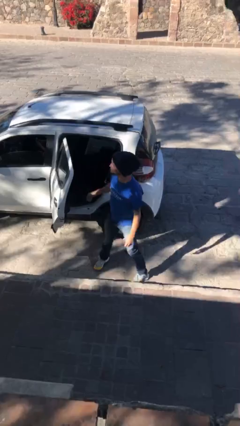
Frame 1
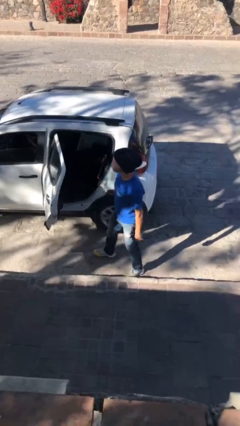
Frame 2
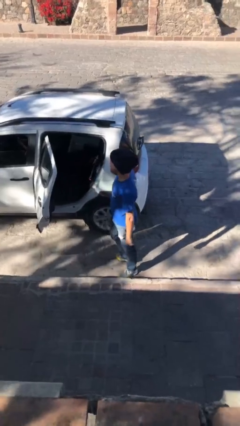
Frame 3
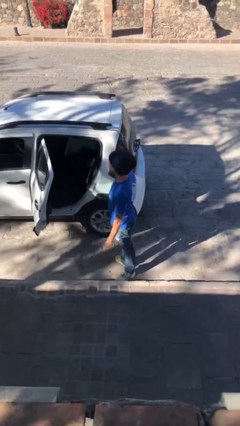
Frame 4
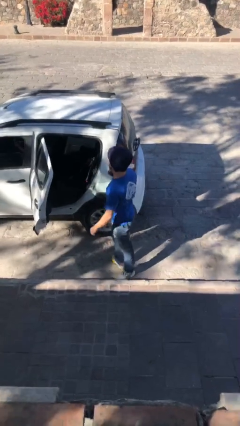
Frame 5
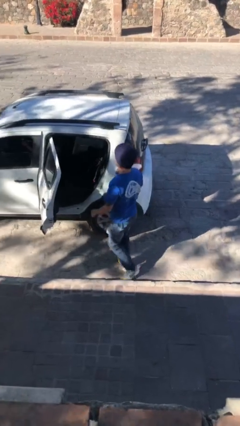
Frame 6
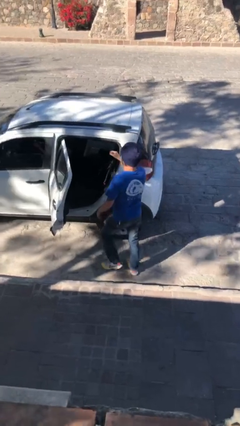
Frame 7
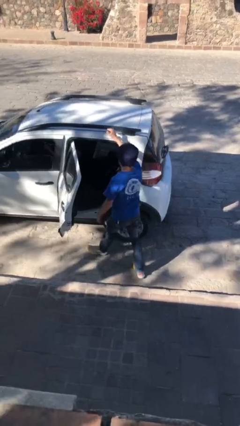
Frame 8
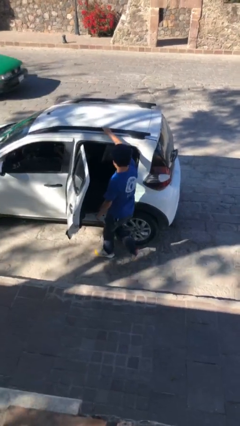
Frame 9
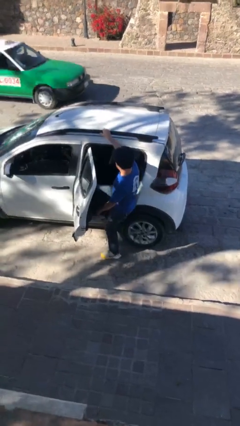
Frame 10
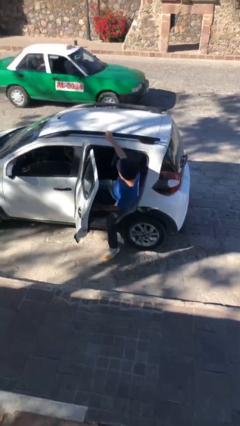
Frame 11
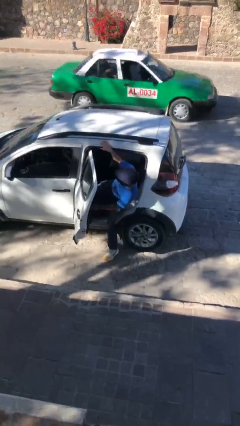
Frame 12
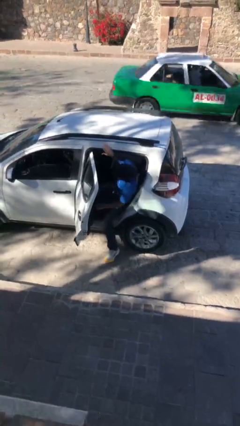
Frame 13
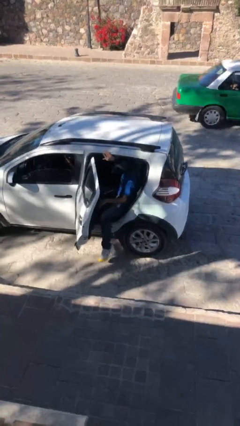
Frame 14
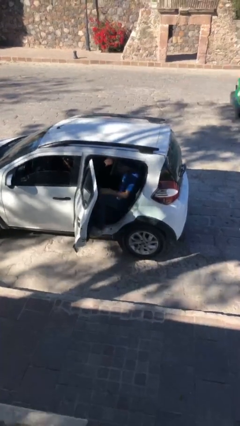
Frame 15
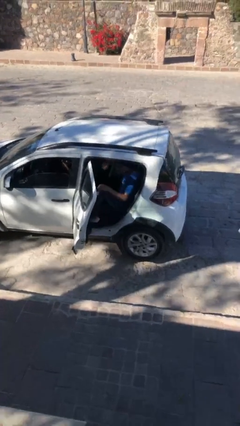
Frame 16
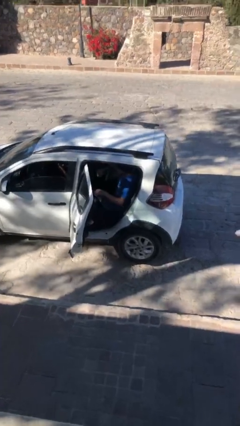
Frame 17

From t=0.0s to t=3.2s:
person enters car

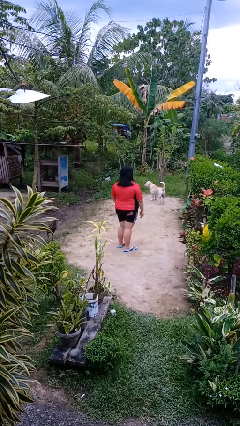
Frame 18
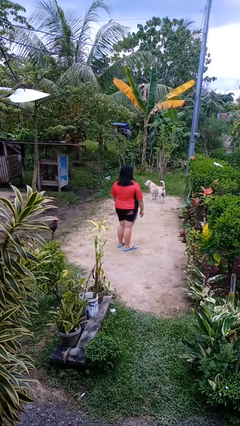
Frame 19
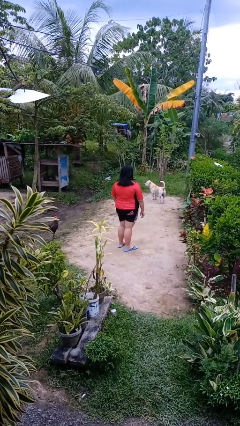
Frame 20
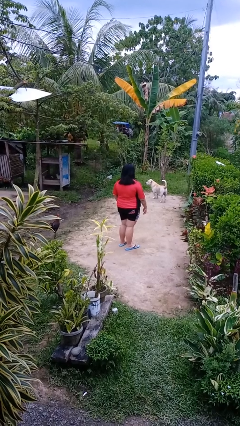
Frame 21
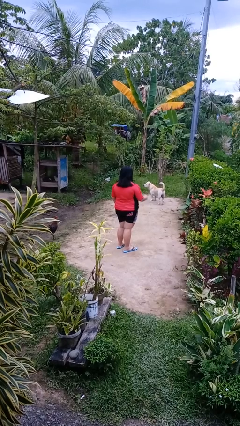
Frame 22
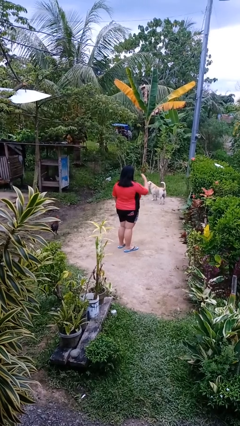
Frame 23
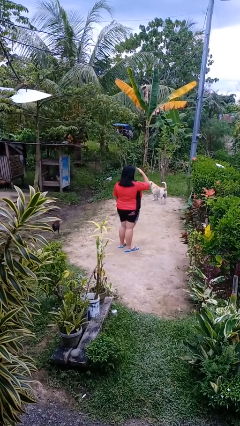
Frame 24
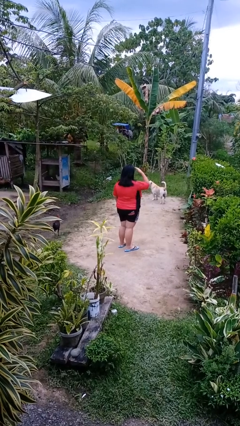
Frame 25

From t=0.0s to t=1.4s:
person shades eyes

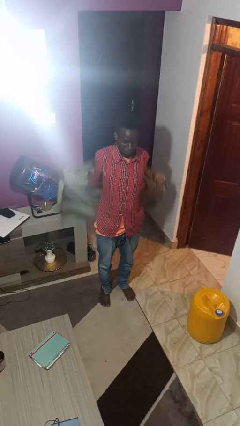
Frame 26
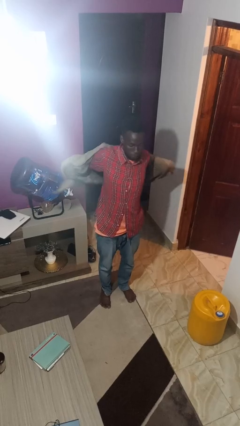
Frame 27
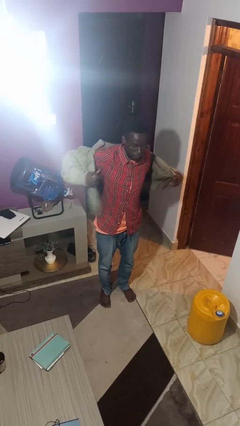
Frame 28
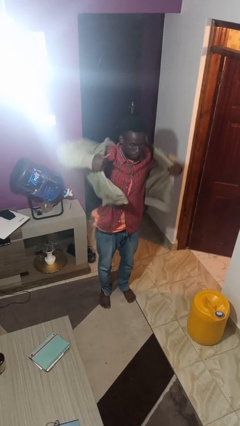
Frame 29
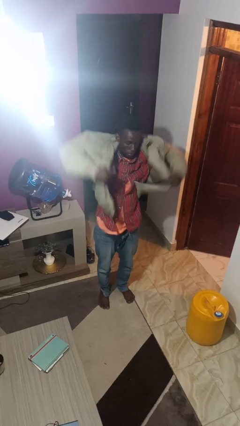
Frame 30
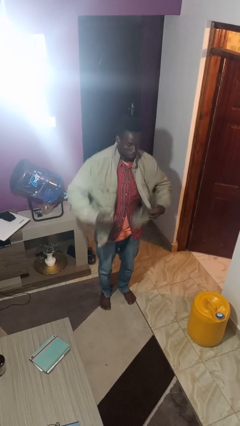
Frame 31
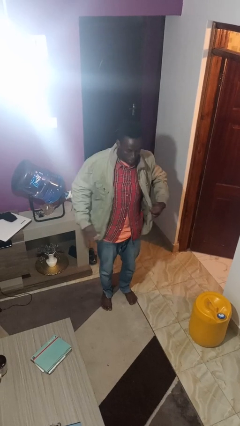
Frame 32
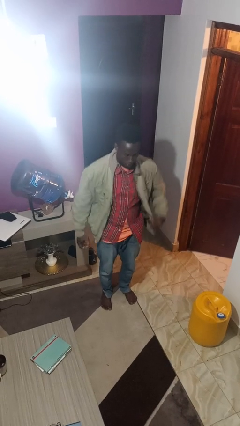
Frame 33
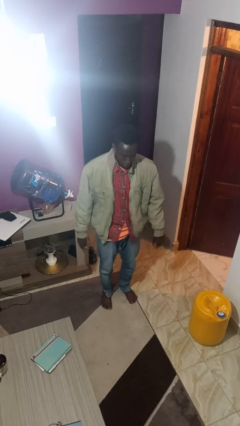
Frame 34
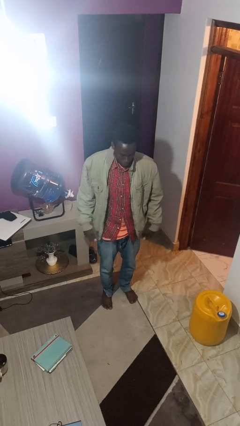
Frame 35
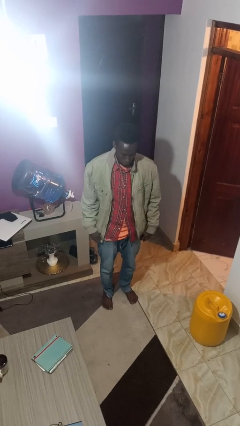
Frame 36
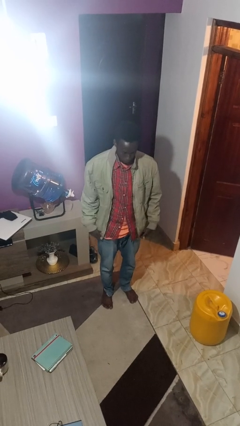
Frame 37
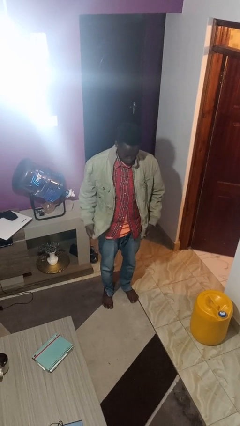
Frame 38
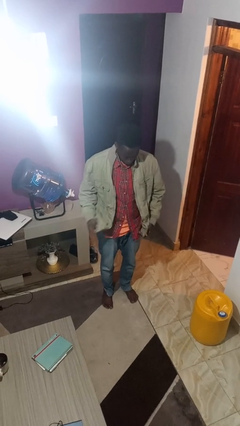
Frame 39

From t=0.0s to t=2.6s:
person puts on jacket

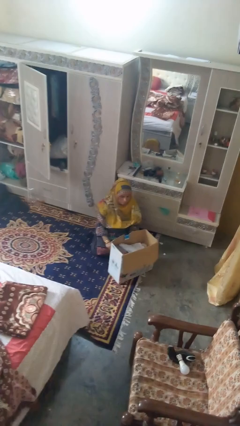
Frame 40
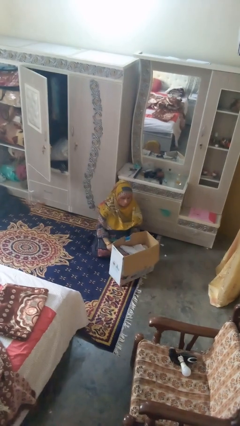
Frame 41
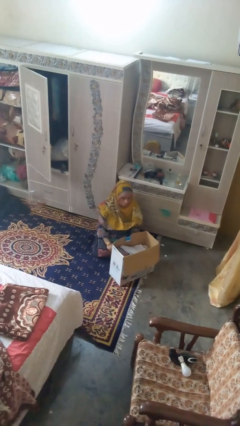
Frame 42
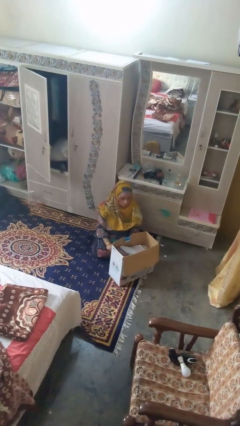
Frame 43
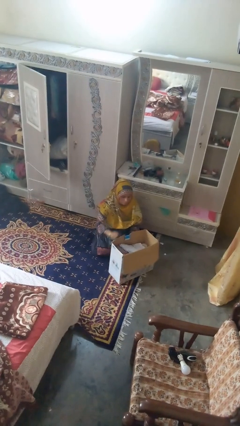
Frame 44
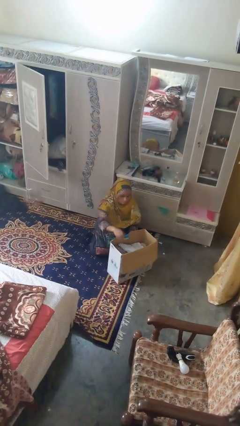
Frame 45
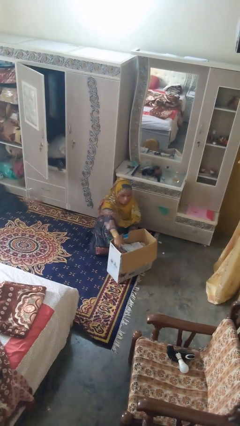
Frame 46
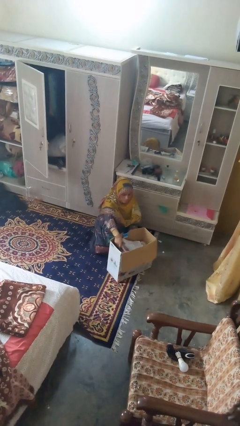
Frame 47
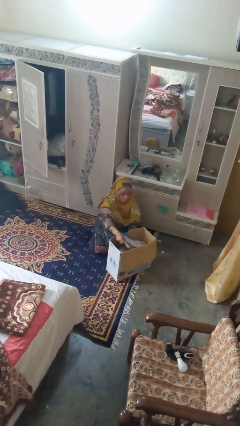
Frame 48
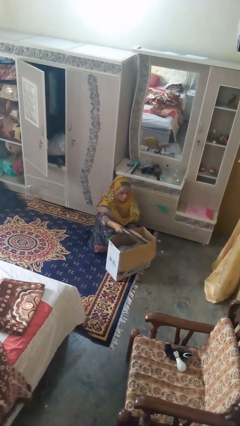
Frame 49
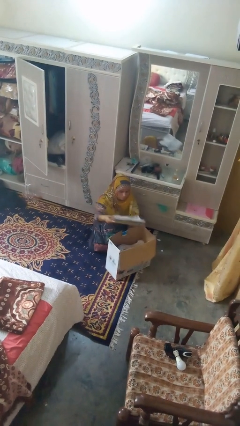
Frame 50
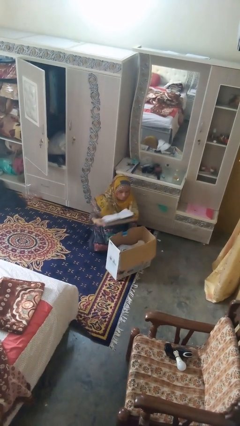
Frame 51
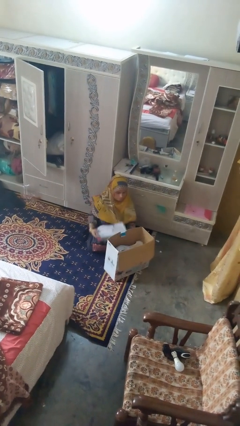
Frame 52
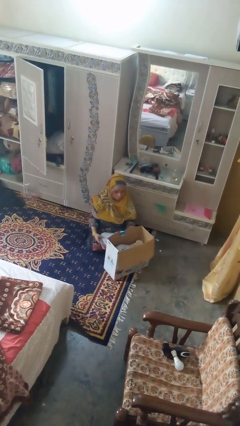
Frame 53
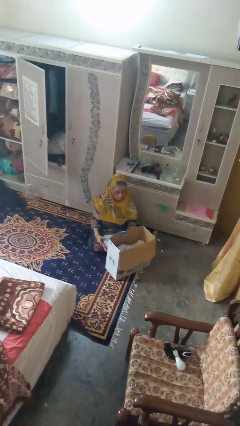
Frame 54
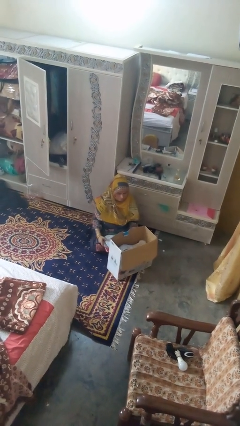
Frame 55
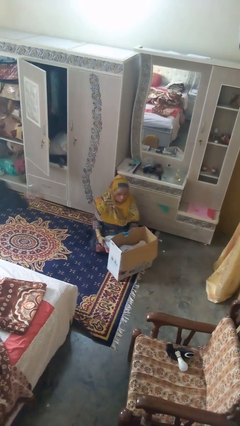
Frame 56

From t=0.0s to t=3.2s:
person takes object from box

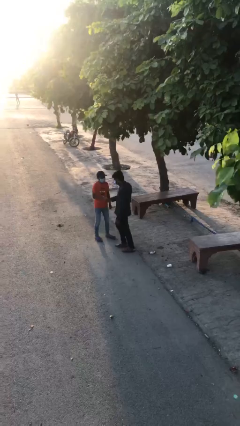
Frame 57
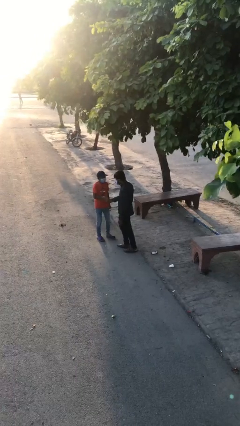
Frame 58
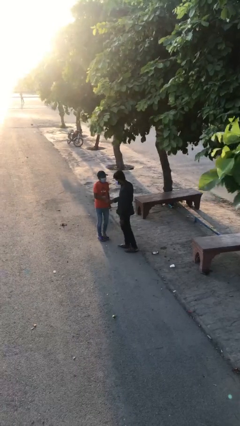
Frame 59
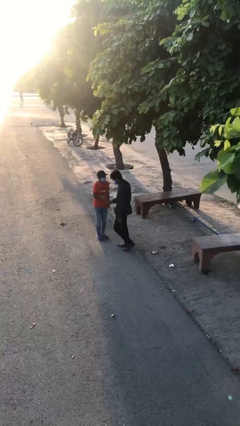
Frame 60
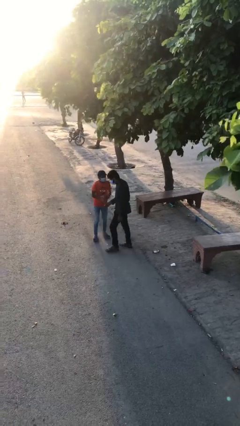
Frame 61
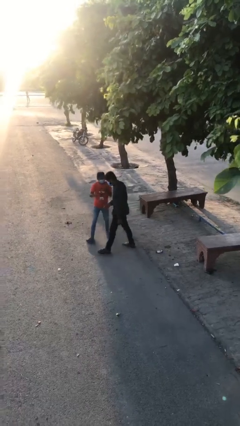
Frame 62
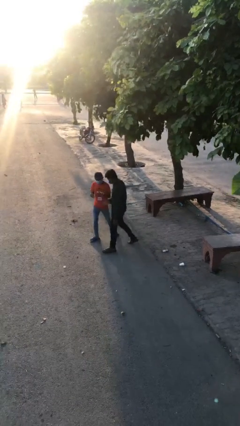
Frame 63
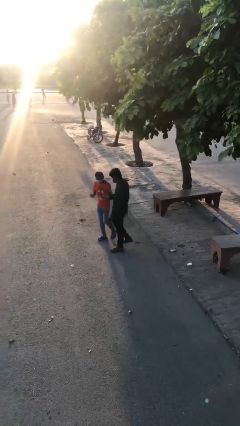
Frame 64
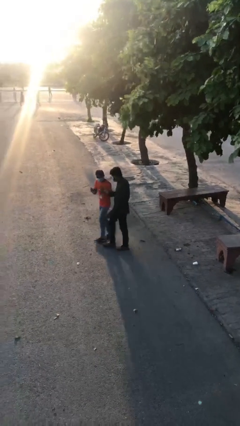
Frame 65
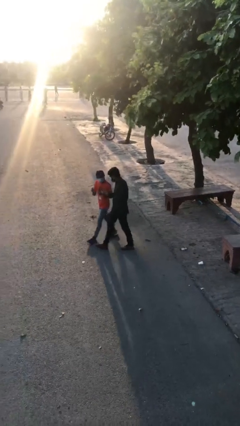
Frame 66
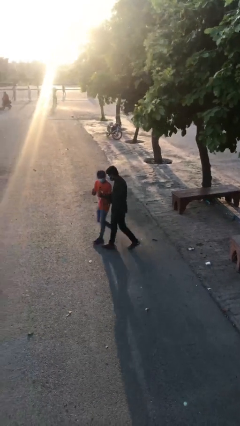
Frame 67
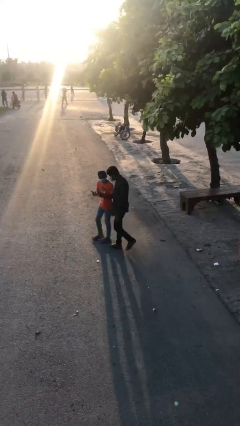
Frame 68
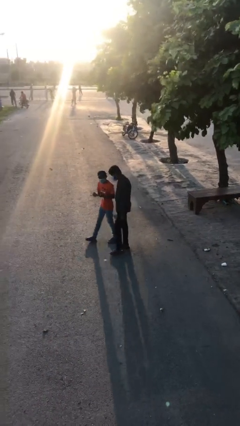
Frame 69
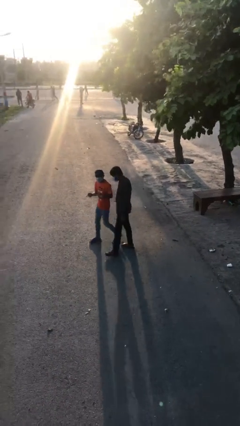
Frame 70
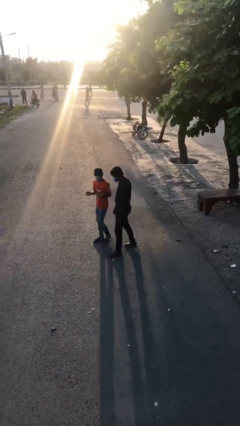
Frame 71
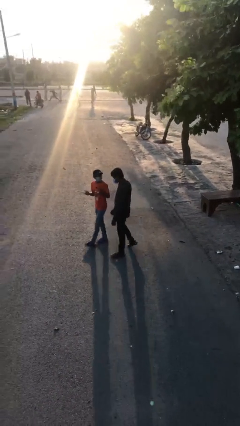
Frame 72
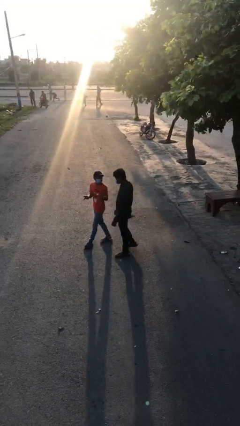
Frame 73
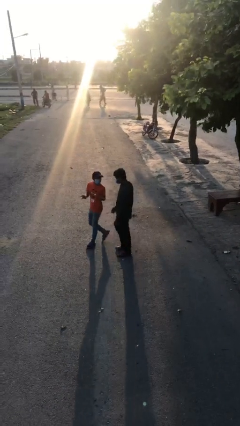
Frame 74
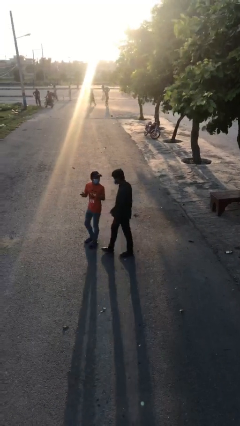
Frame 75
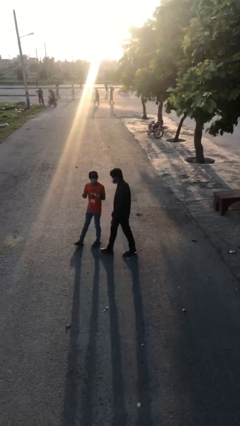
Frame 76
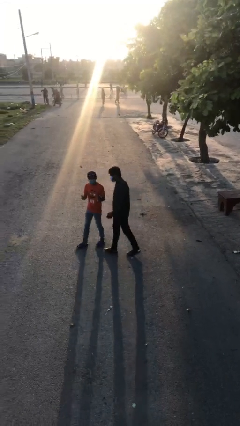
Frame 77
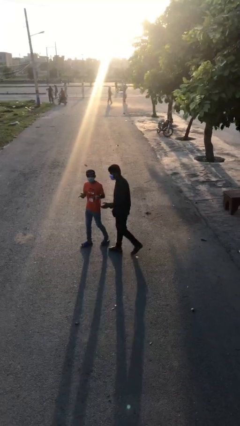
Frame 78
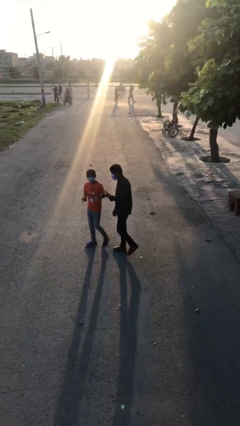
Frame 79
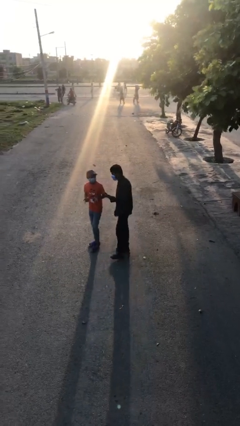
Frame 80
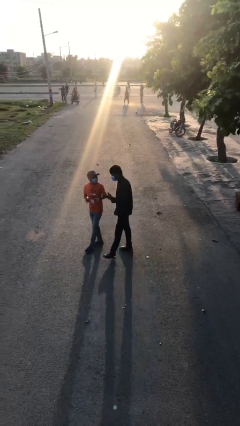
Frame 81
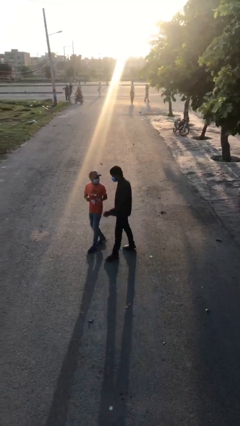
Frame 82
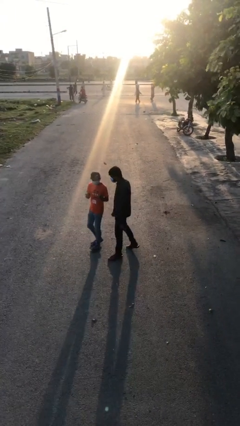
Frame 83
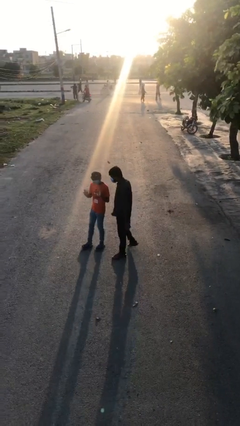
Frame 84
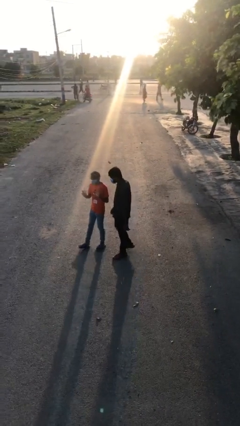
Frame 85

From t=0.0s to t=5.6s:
person talks to person

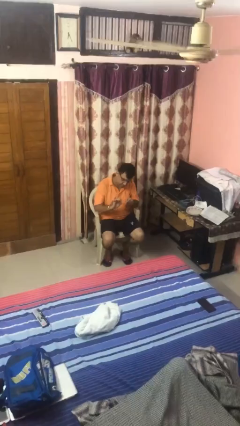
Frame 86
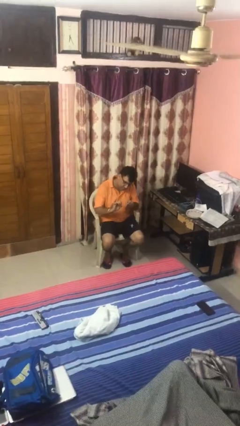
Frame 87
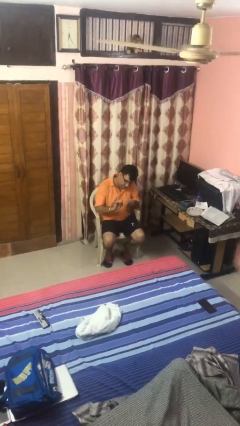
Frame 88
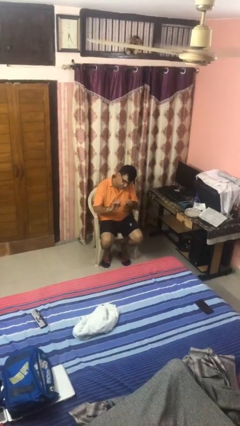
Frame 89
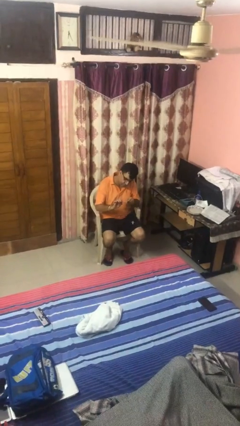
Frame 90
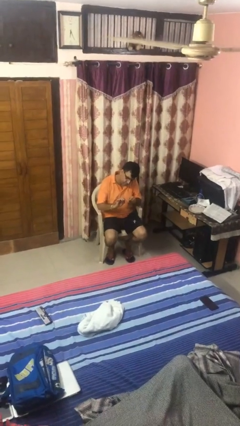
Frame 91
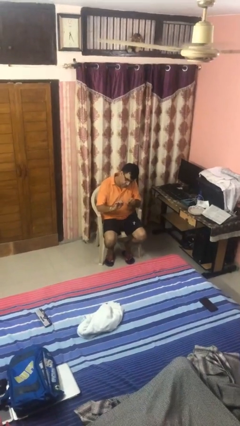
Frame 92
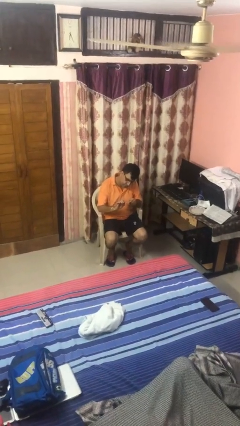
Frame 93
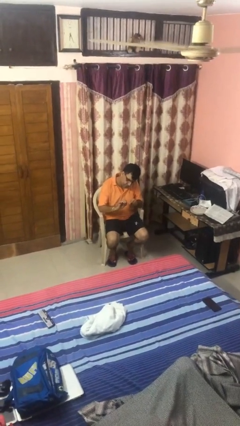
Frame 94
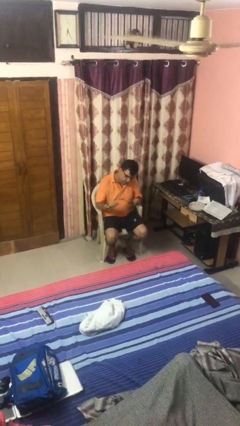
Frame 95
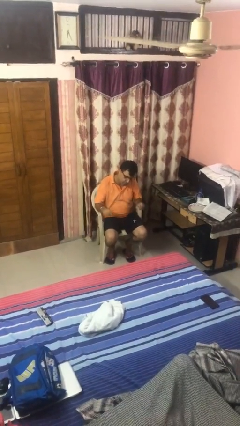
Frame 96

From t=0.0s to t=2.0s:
person files fingernails
